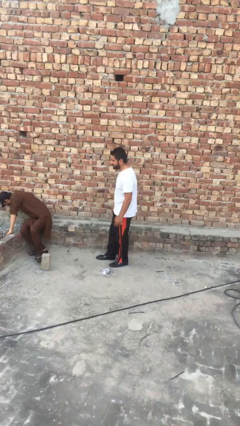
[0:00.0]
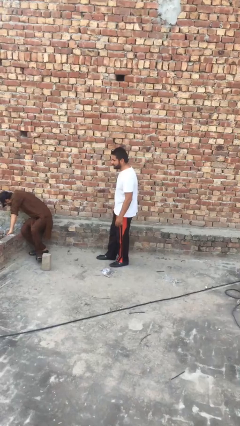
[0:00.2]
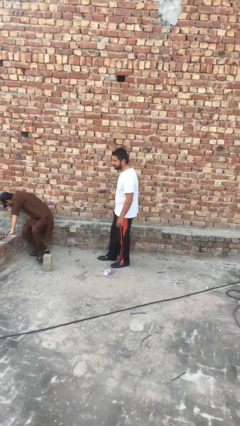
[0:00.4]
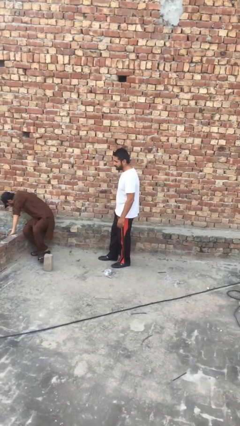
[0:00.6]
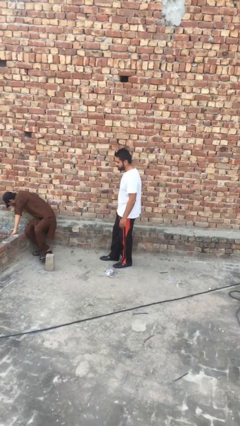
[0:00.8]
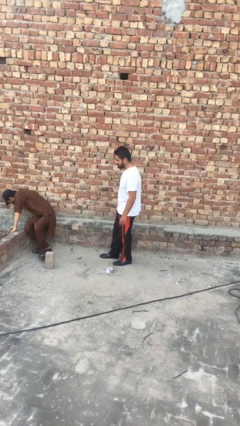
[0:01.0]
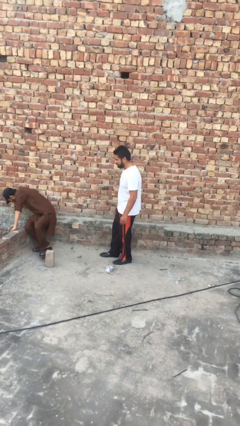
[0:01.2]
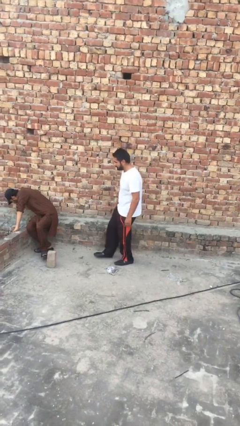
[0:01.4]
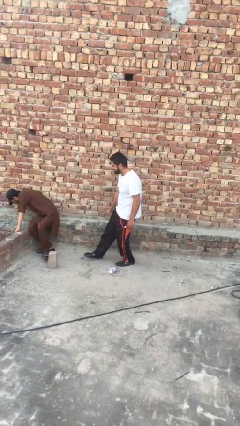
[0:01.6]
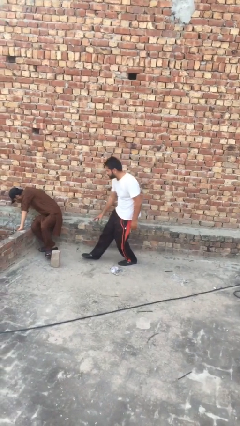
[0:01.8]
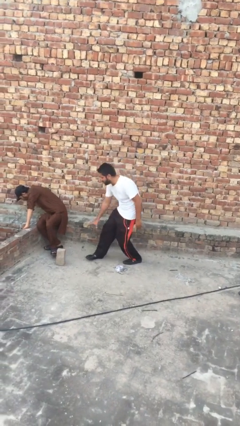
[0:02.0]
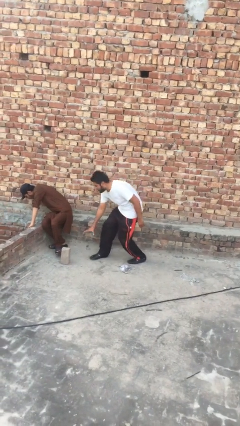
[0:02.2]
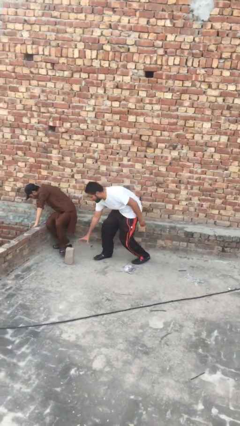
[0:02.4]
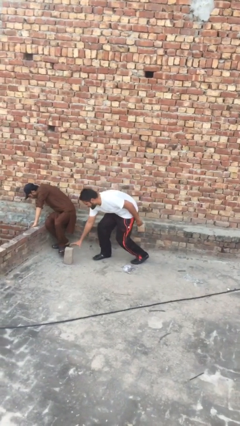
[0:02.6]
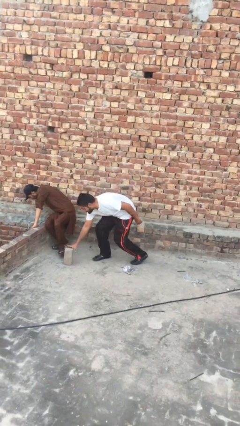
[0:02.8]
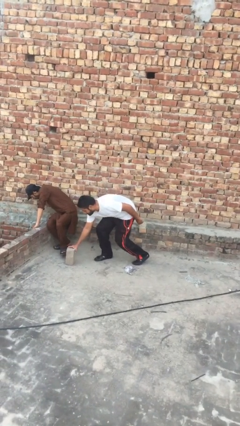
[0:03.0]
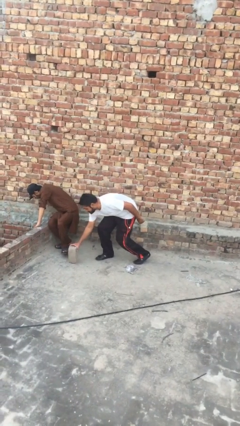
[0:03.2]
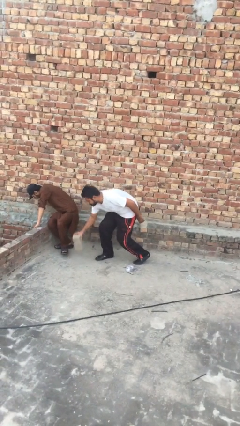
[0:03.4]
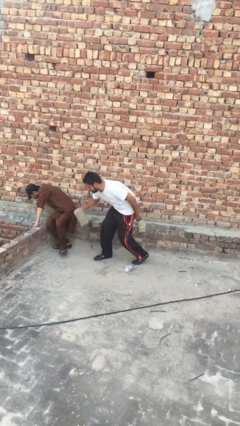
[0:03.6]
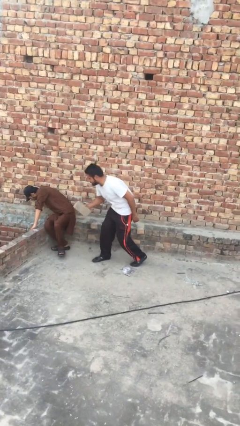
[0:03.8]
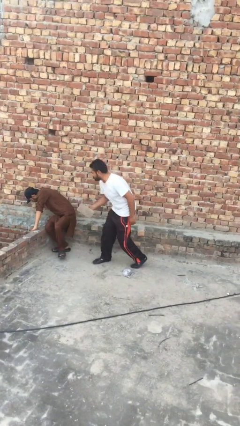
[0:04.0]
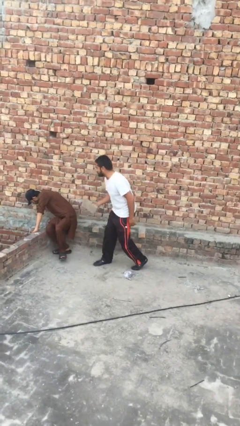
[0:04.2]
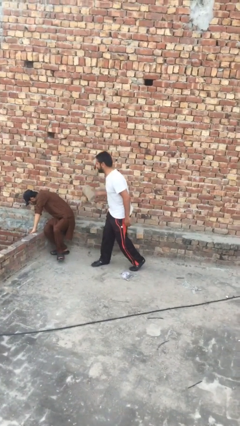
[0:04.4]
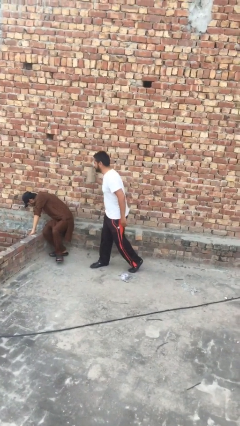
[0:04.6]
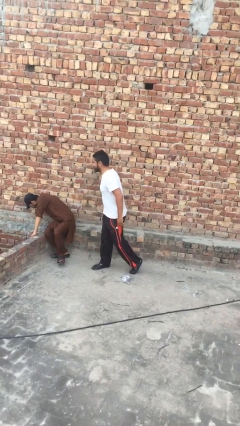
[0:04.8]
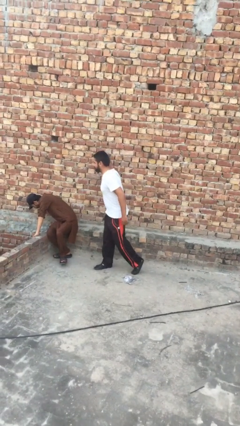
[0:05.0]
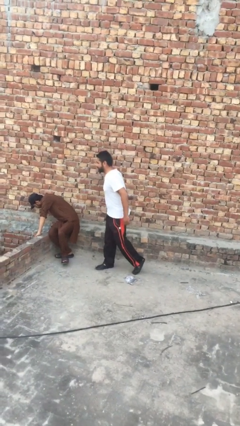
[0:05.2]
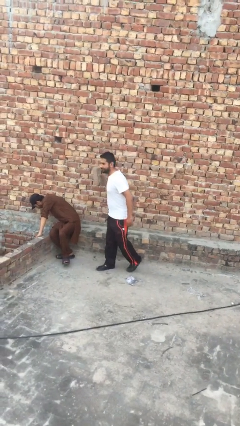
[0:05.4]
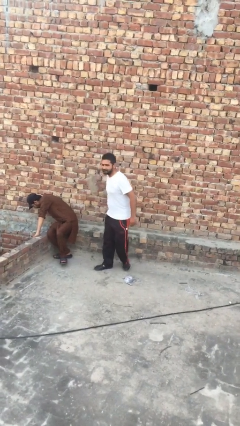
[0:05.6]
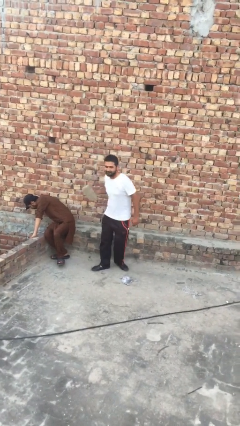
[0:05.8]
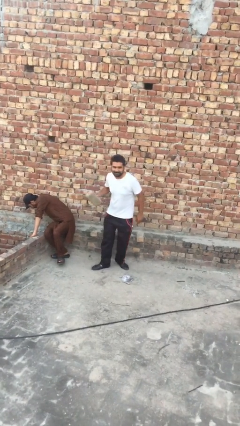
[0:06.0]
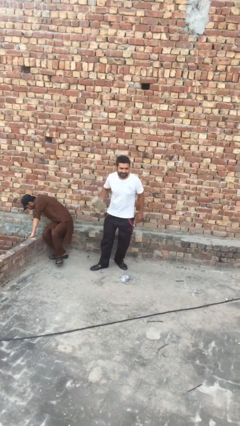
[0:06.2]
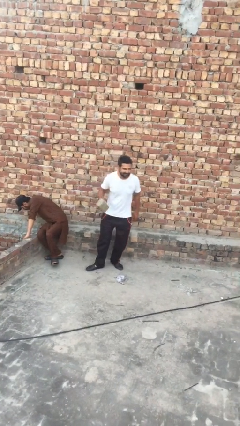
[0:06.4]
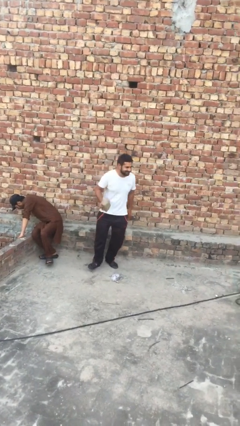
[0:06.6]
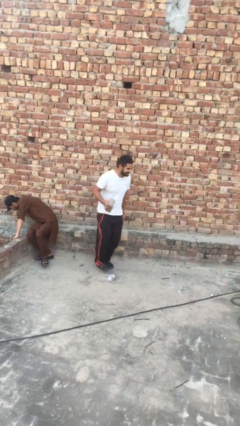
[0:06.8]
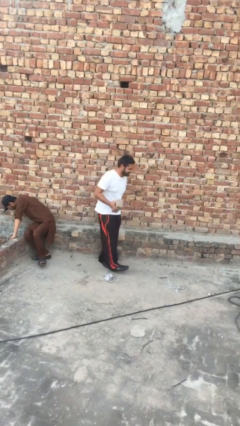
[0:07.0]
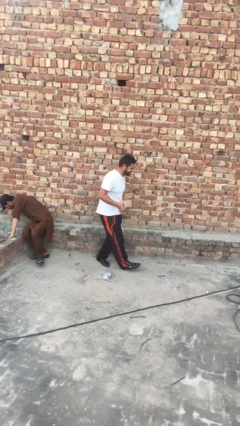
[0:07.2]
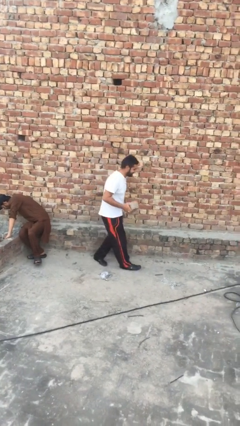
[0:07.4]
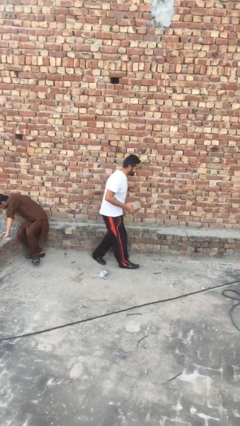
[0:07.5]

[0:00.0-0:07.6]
person steals object from person

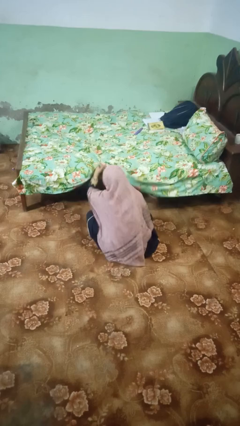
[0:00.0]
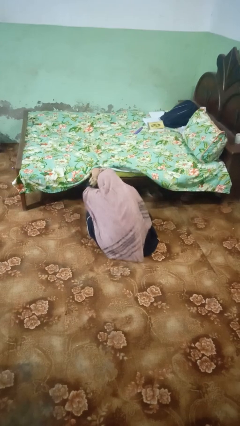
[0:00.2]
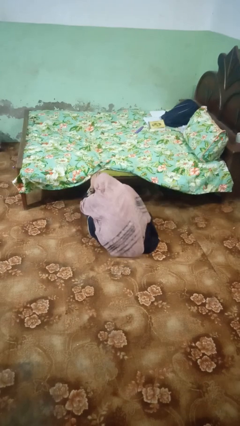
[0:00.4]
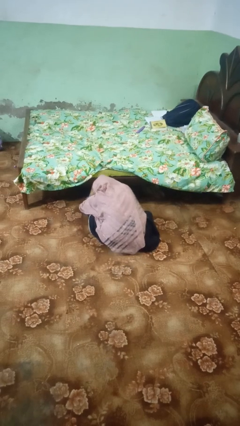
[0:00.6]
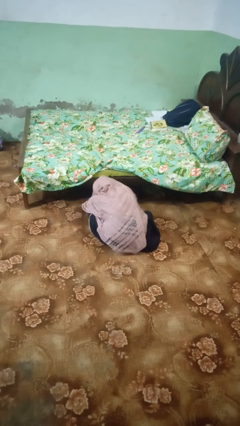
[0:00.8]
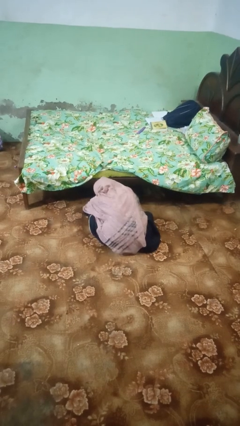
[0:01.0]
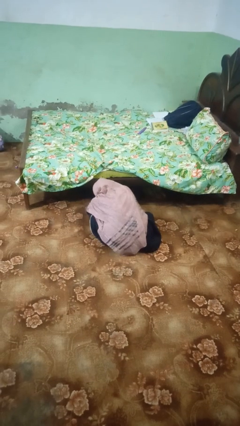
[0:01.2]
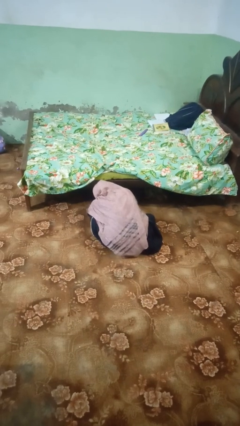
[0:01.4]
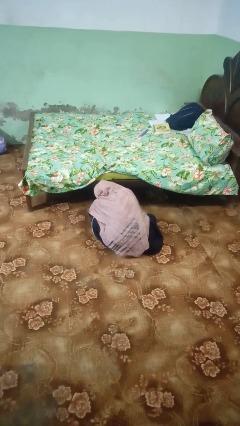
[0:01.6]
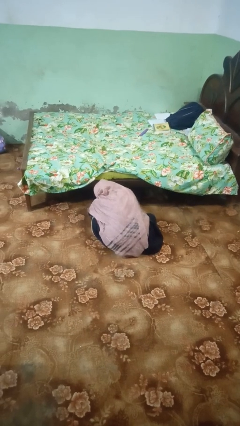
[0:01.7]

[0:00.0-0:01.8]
person searches under bed

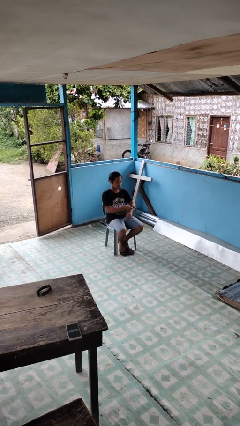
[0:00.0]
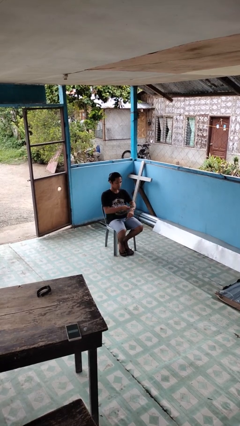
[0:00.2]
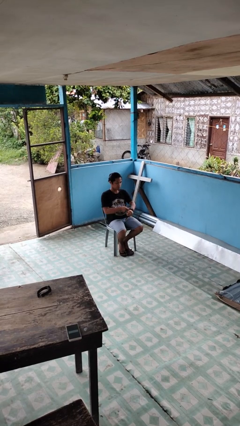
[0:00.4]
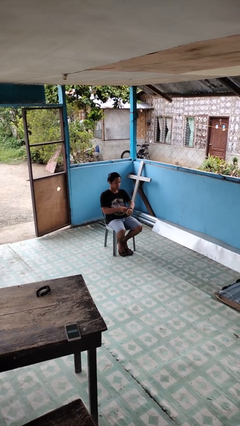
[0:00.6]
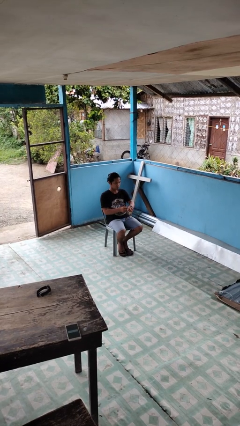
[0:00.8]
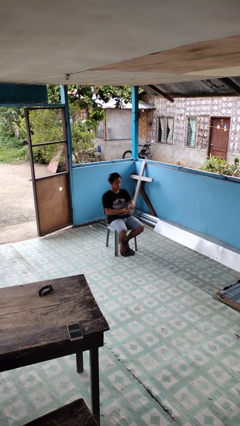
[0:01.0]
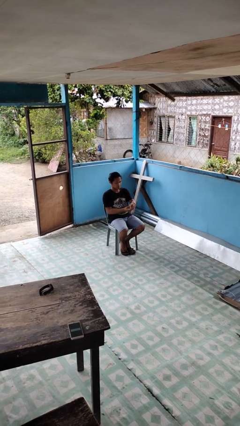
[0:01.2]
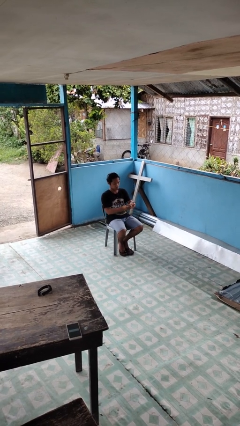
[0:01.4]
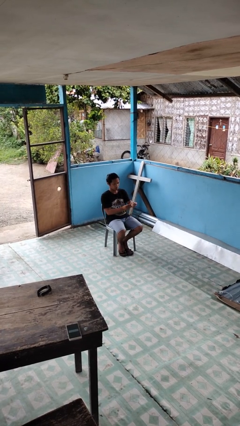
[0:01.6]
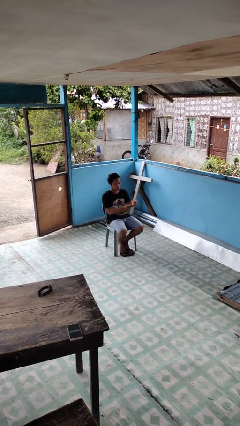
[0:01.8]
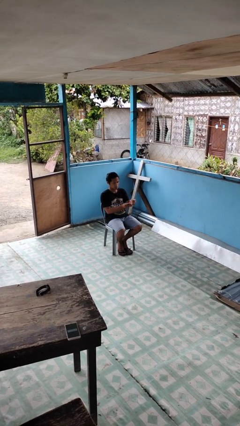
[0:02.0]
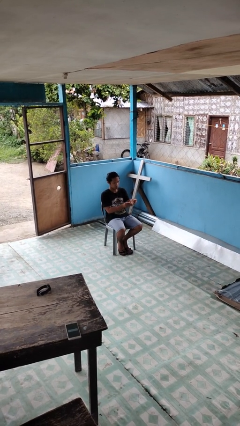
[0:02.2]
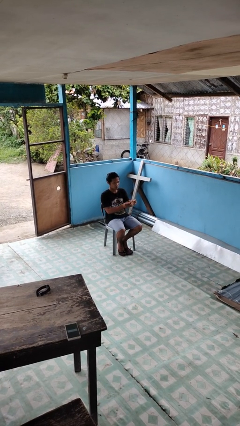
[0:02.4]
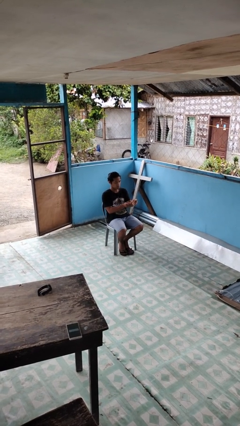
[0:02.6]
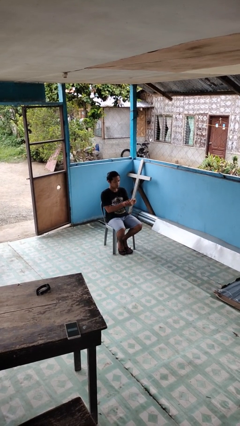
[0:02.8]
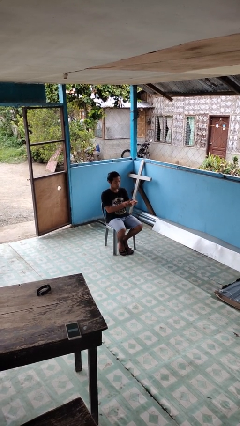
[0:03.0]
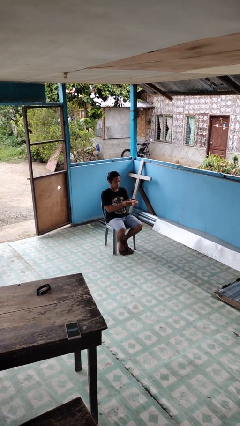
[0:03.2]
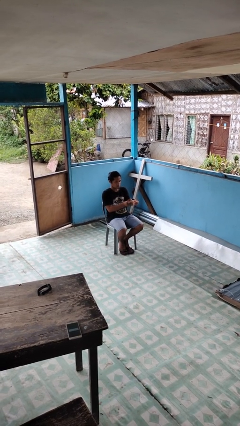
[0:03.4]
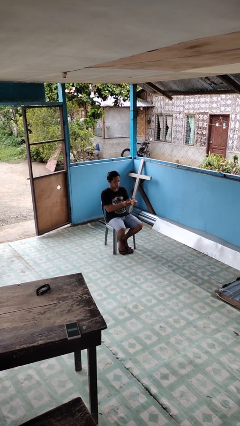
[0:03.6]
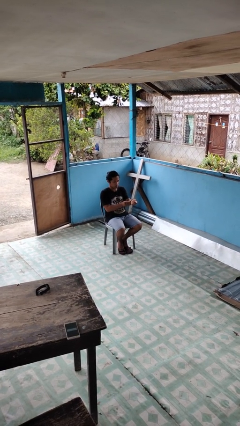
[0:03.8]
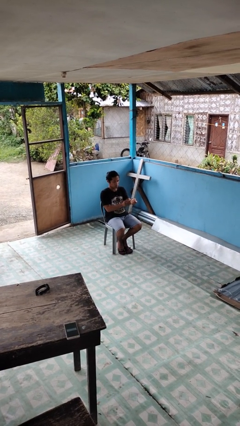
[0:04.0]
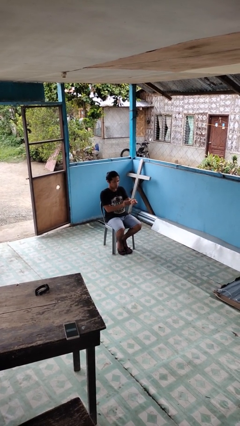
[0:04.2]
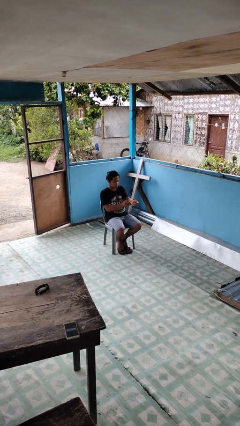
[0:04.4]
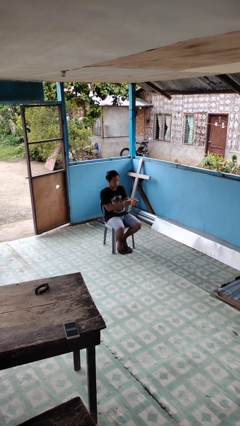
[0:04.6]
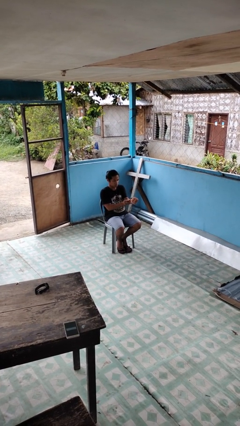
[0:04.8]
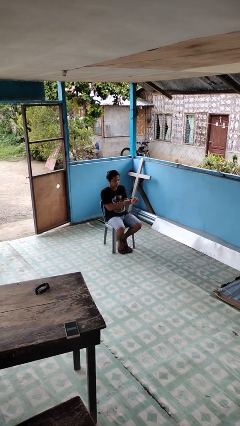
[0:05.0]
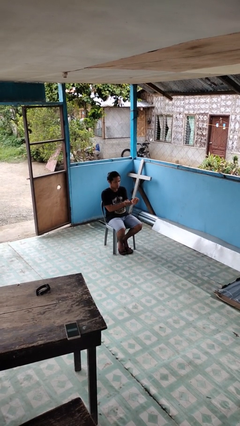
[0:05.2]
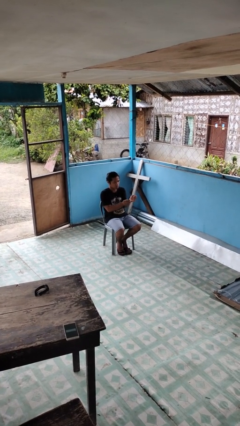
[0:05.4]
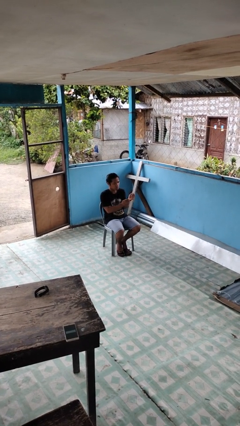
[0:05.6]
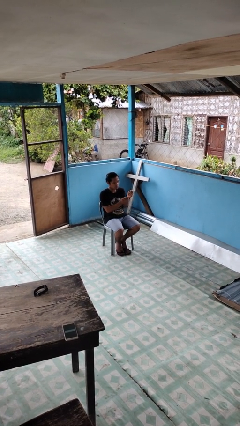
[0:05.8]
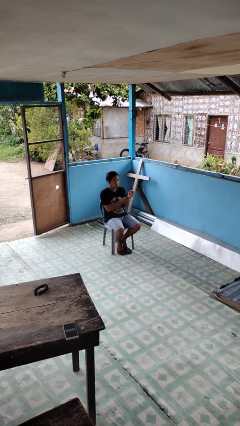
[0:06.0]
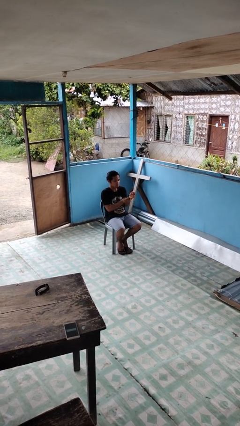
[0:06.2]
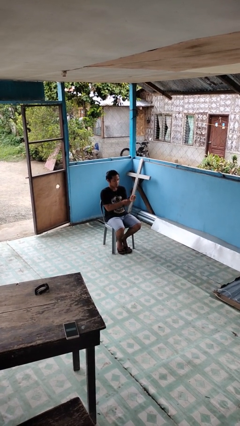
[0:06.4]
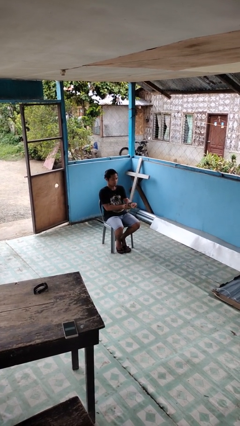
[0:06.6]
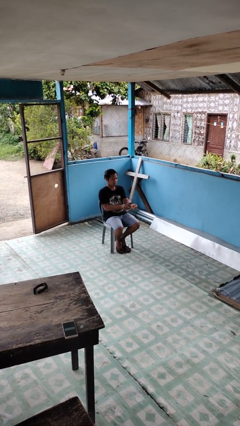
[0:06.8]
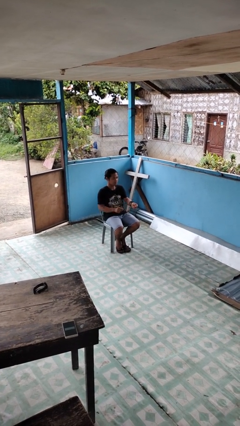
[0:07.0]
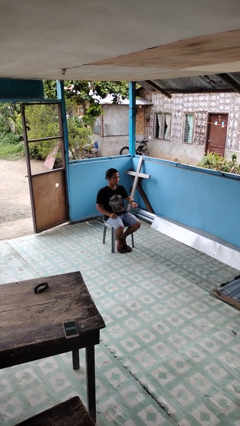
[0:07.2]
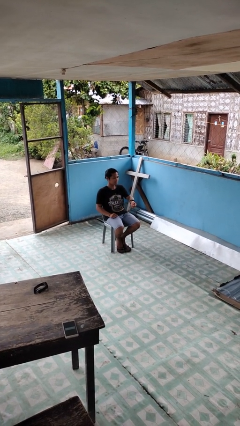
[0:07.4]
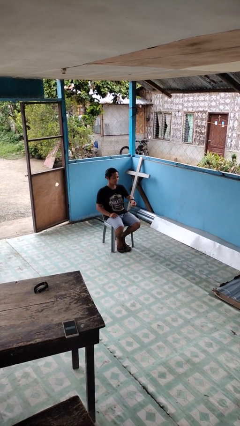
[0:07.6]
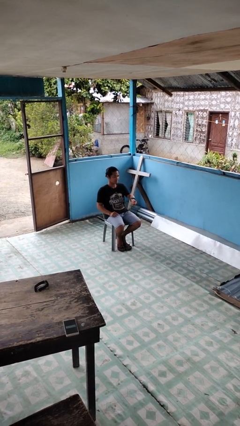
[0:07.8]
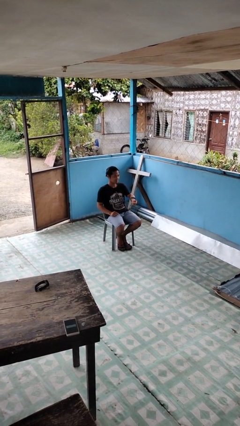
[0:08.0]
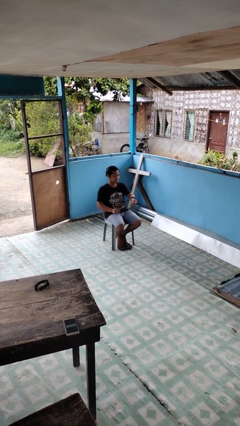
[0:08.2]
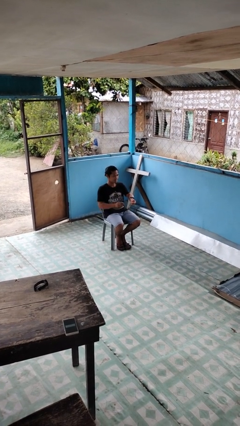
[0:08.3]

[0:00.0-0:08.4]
person puts on wristwatch
